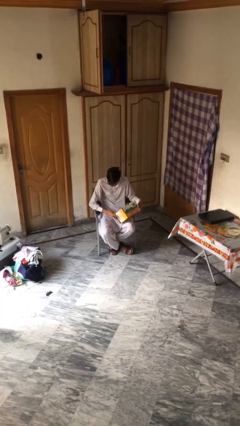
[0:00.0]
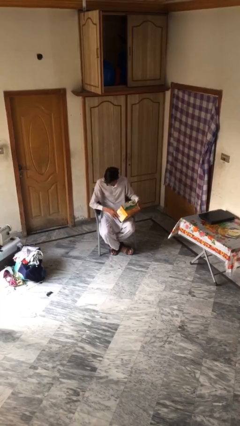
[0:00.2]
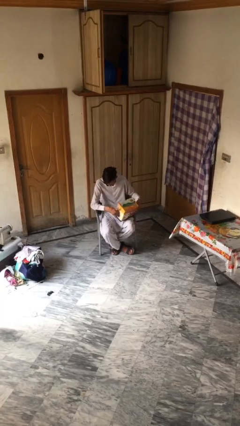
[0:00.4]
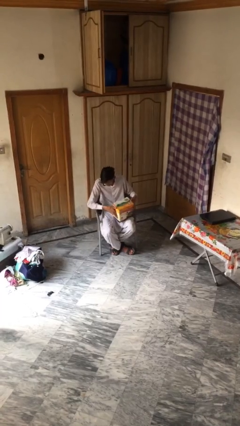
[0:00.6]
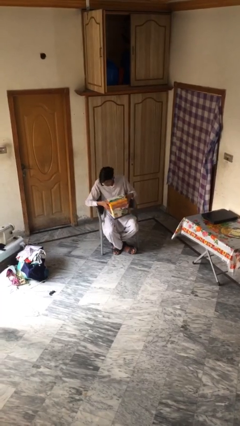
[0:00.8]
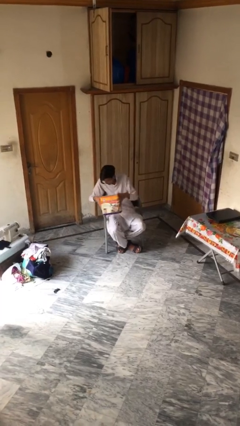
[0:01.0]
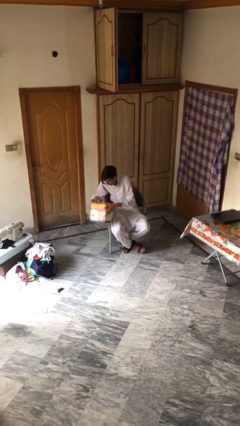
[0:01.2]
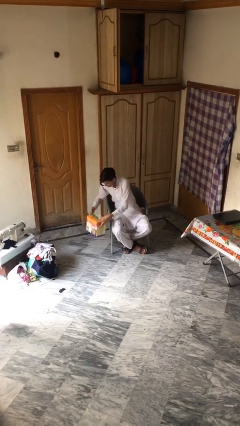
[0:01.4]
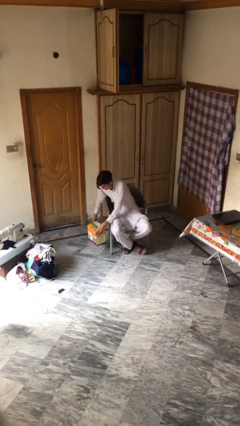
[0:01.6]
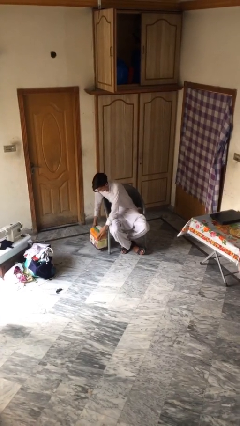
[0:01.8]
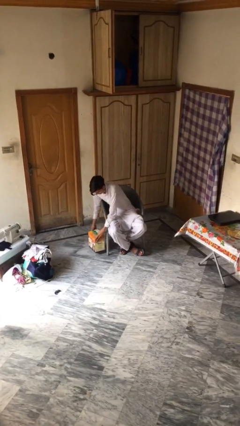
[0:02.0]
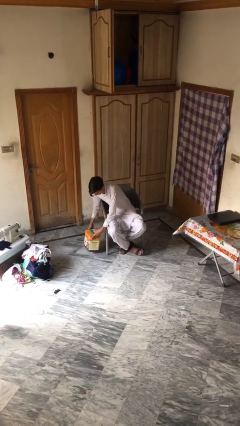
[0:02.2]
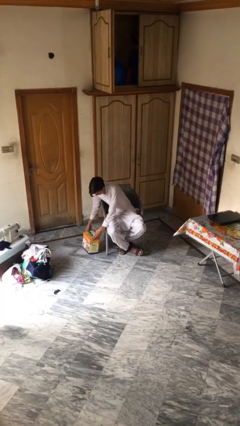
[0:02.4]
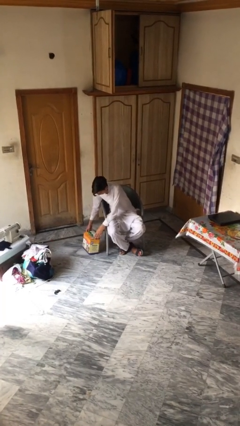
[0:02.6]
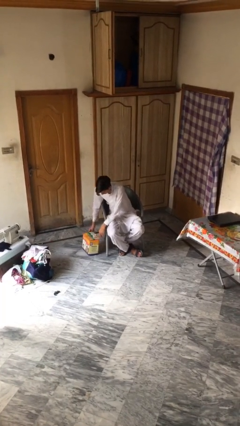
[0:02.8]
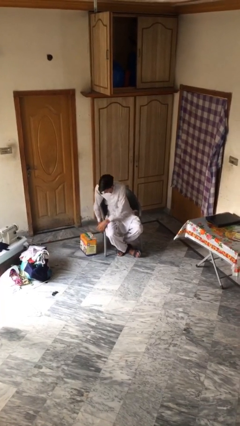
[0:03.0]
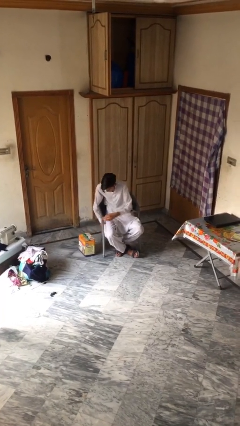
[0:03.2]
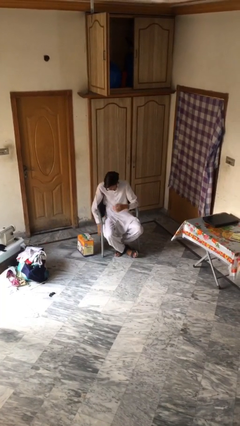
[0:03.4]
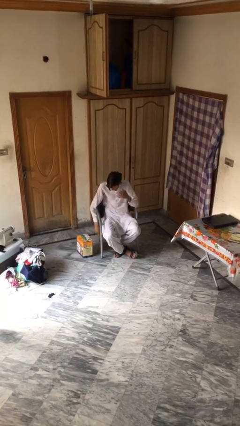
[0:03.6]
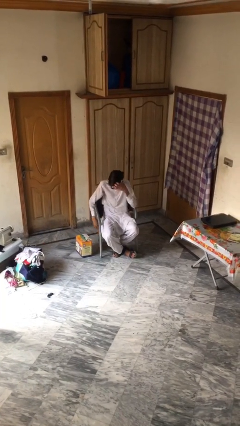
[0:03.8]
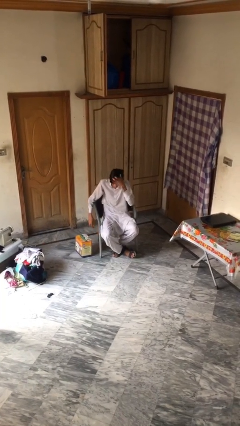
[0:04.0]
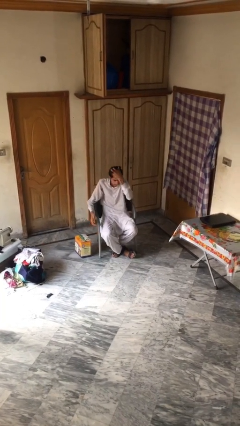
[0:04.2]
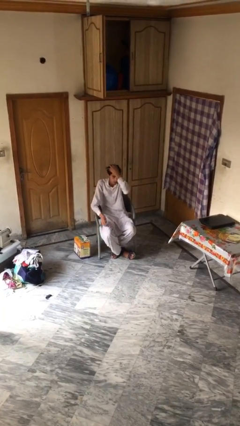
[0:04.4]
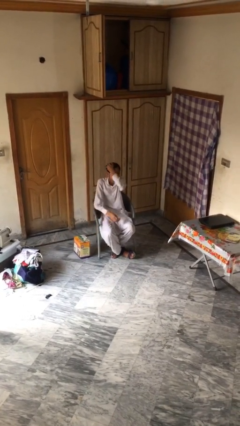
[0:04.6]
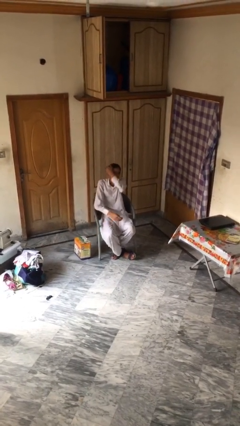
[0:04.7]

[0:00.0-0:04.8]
person puts down object on floor

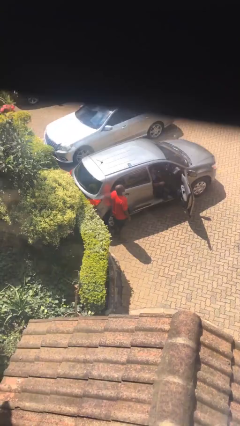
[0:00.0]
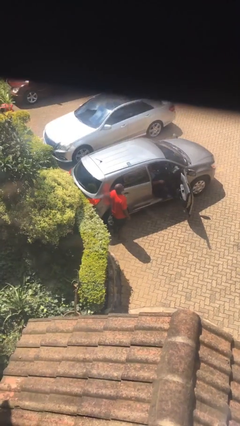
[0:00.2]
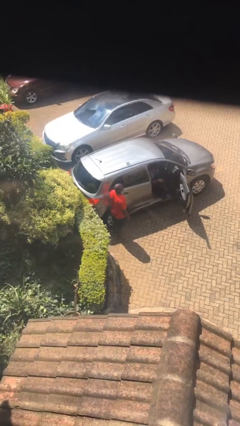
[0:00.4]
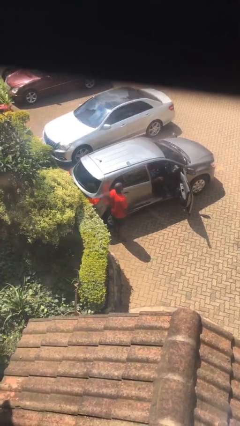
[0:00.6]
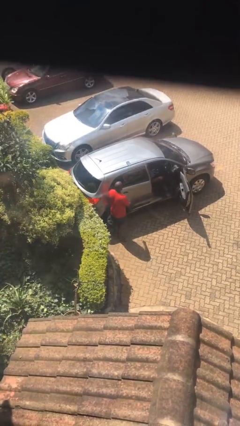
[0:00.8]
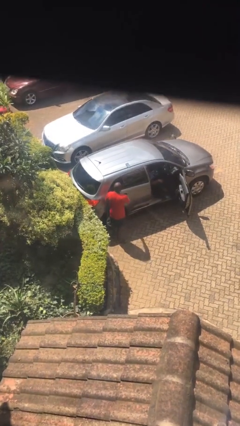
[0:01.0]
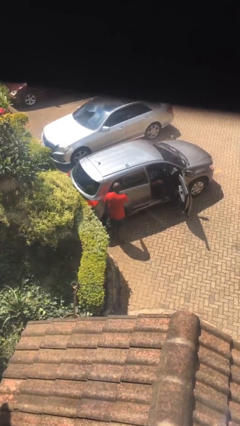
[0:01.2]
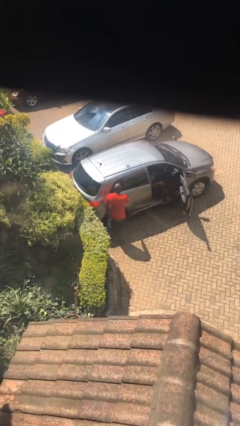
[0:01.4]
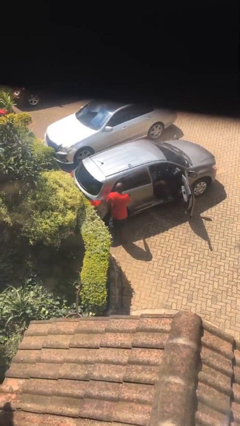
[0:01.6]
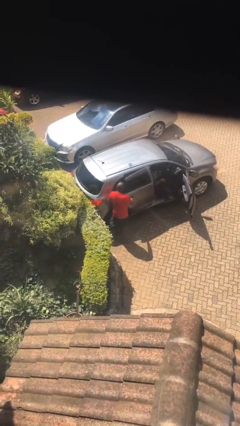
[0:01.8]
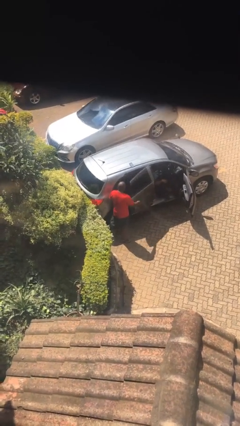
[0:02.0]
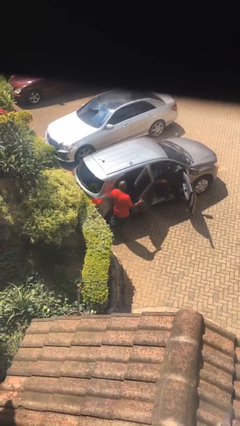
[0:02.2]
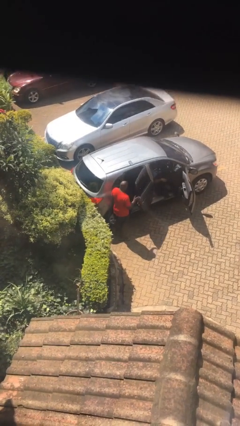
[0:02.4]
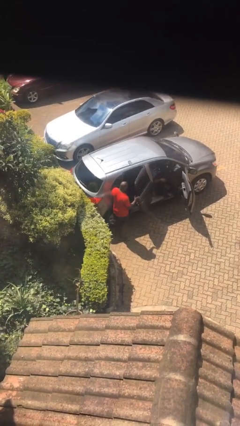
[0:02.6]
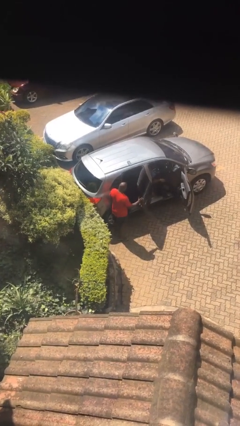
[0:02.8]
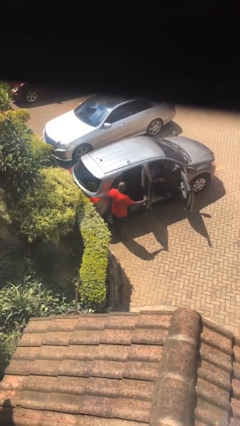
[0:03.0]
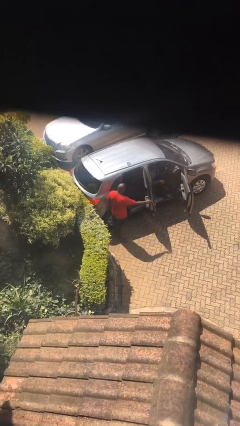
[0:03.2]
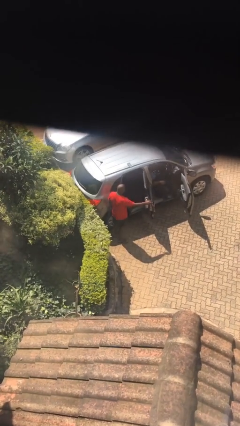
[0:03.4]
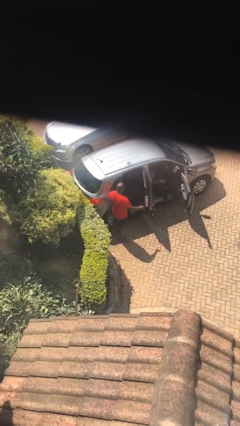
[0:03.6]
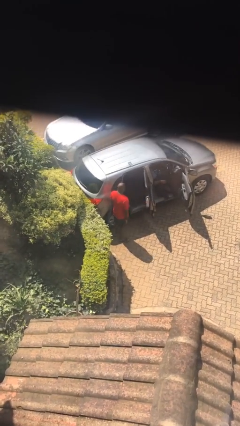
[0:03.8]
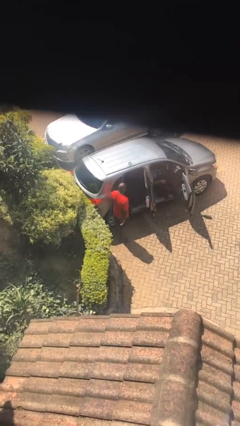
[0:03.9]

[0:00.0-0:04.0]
person opens car door

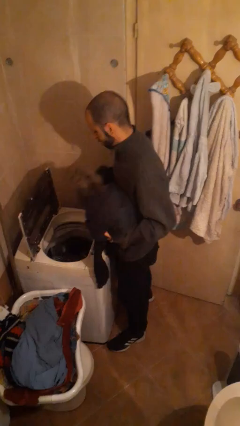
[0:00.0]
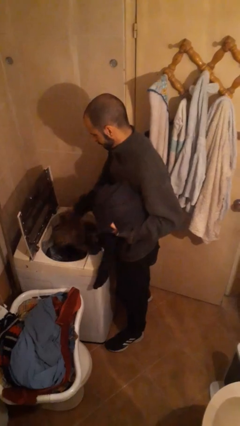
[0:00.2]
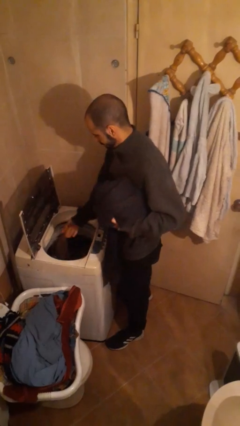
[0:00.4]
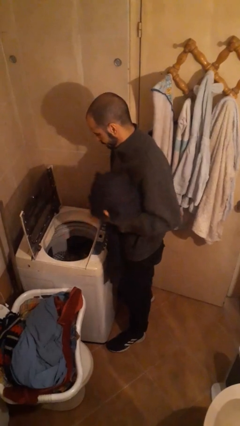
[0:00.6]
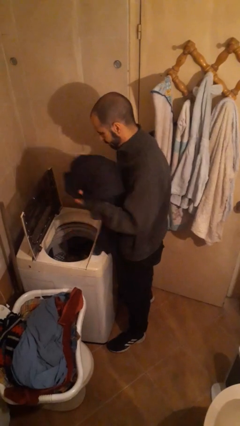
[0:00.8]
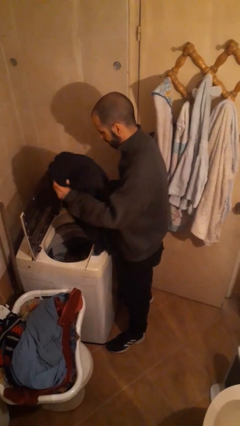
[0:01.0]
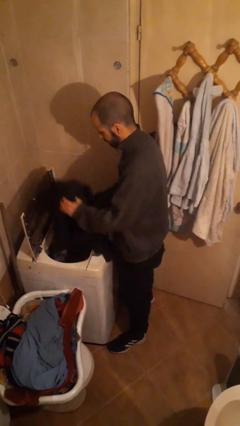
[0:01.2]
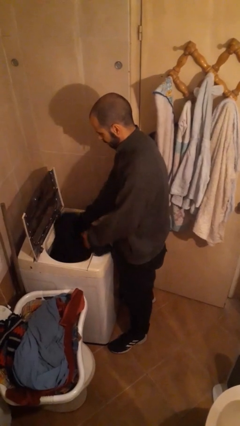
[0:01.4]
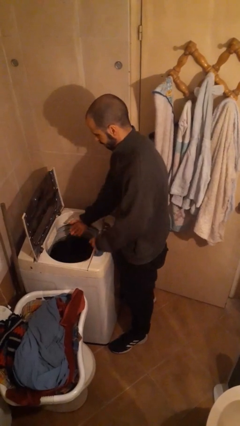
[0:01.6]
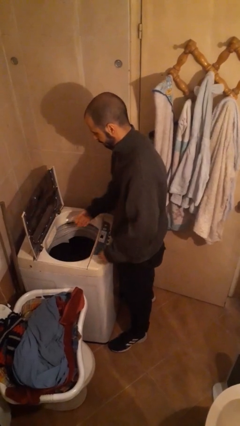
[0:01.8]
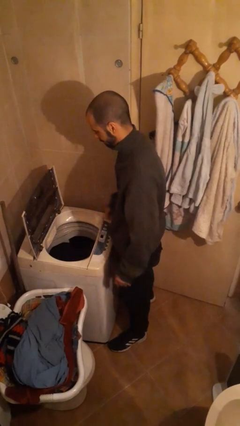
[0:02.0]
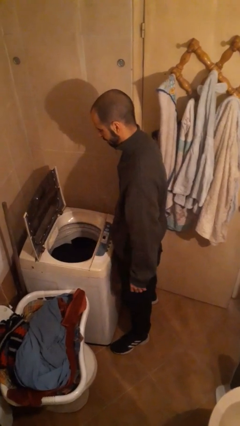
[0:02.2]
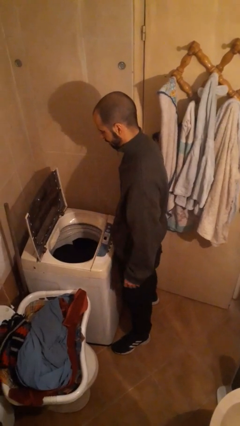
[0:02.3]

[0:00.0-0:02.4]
person loads clotheswasher

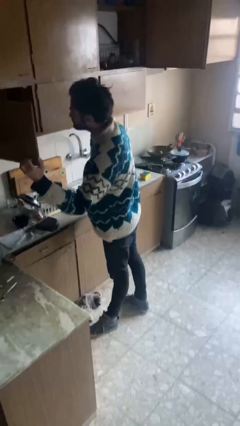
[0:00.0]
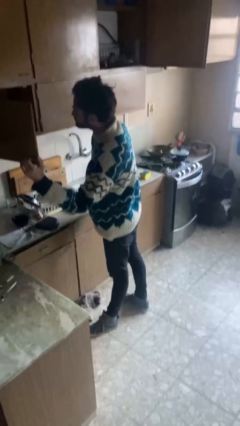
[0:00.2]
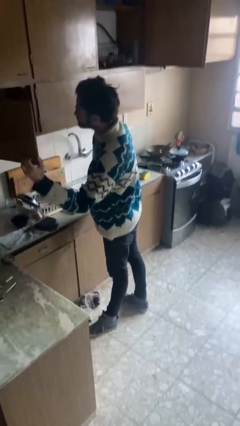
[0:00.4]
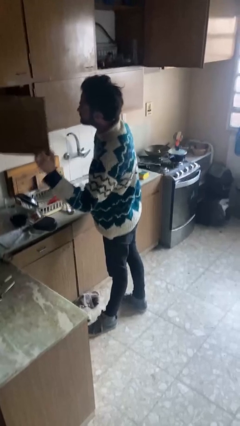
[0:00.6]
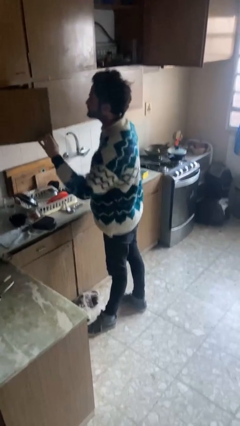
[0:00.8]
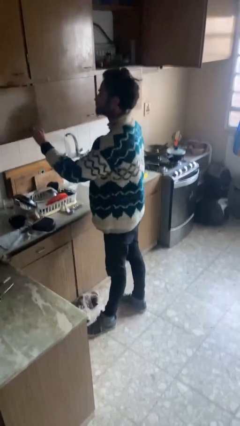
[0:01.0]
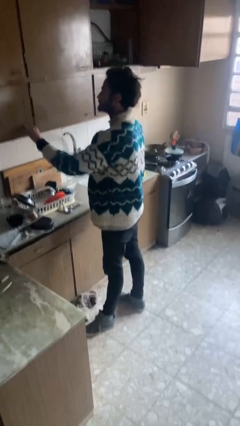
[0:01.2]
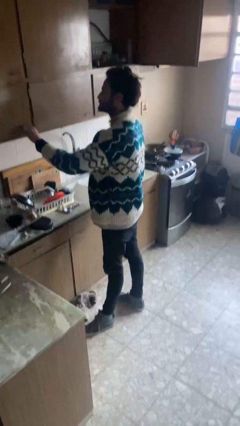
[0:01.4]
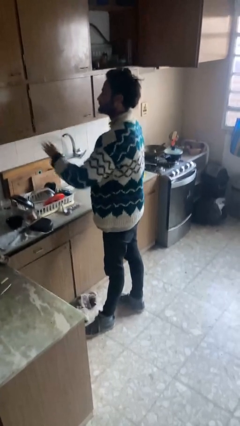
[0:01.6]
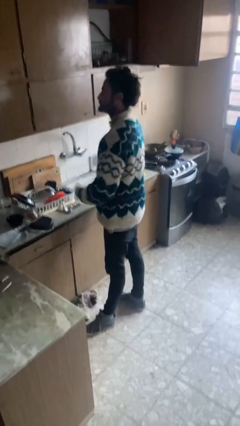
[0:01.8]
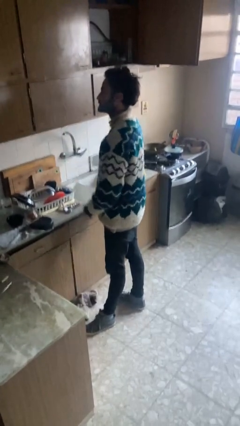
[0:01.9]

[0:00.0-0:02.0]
person closes cabinet

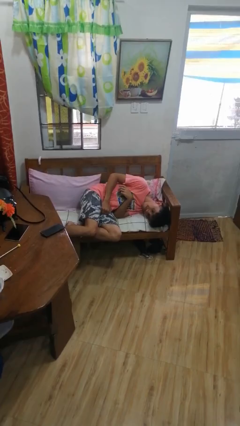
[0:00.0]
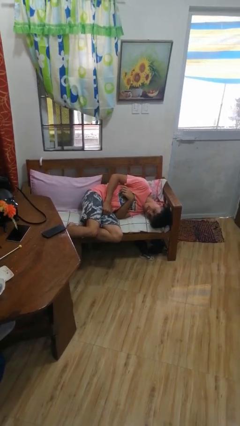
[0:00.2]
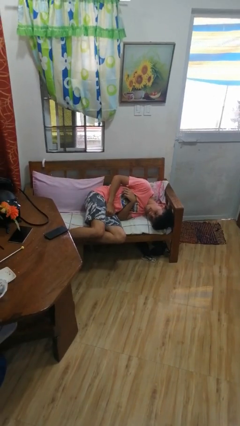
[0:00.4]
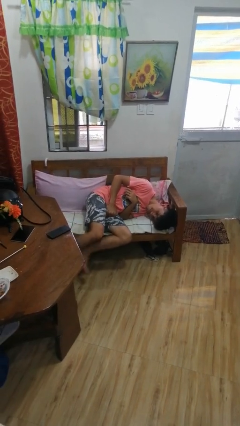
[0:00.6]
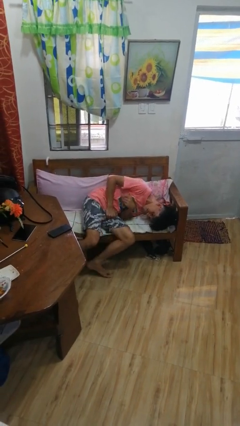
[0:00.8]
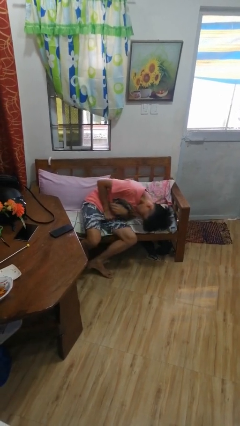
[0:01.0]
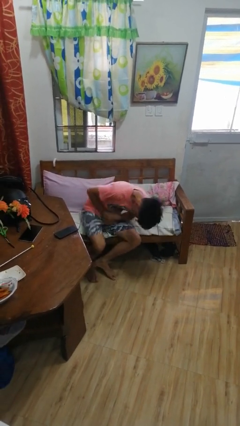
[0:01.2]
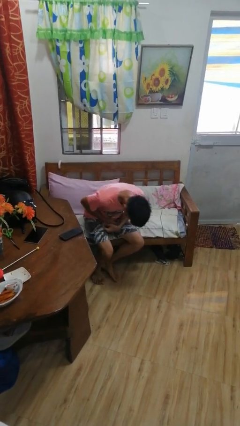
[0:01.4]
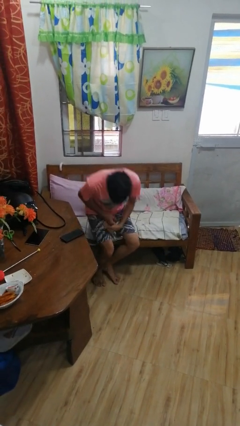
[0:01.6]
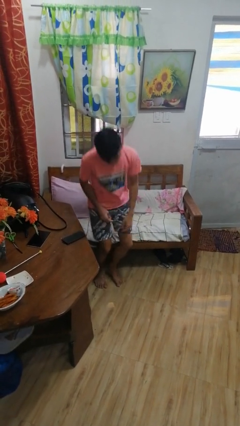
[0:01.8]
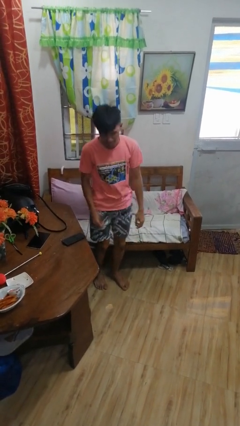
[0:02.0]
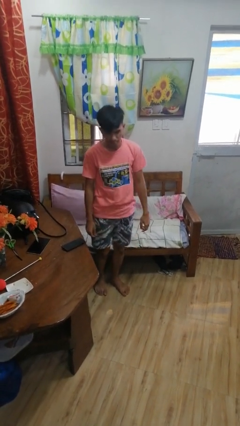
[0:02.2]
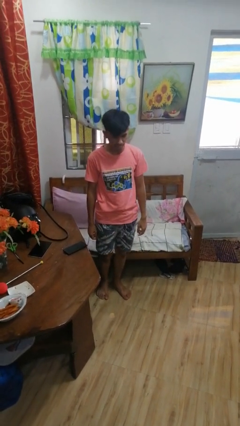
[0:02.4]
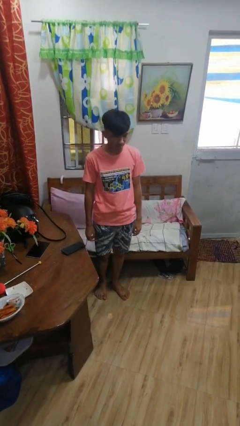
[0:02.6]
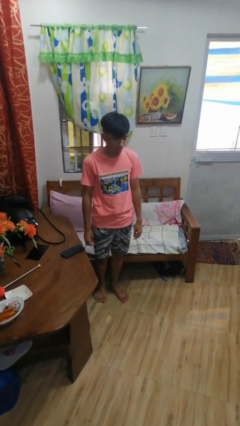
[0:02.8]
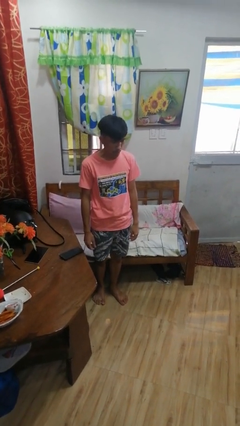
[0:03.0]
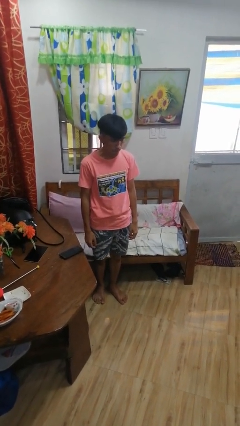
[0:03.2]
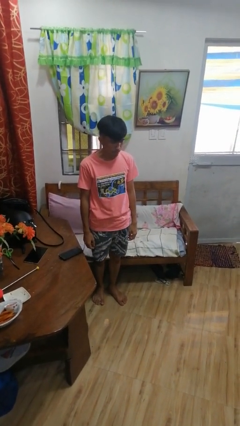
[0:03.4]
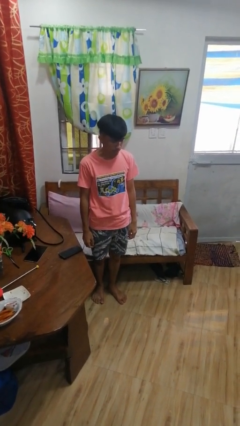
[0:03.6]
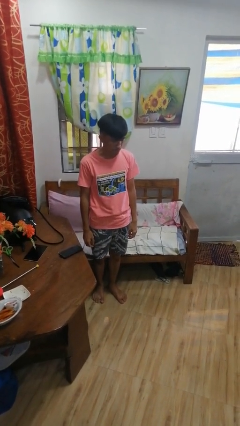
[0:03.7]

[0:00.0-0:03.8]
person stands up

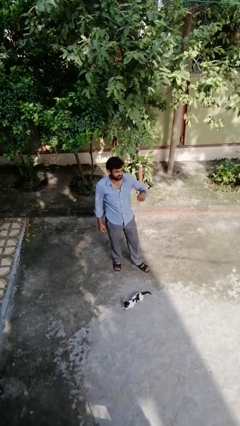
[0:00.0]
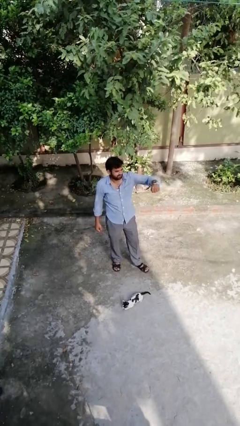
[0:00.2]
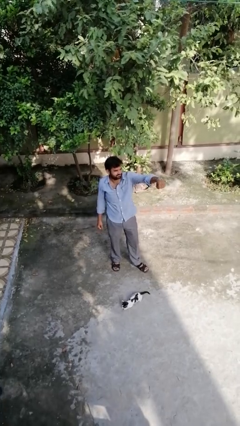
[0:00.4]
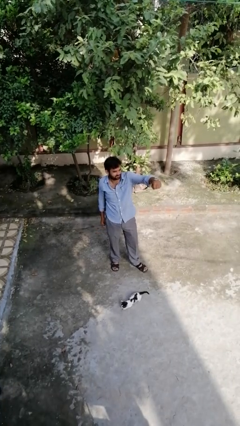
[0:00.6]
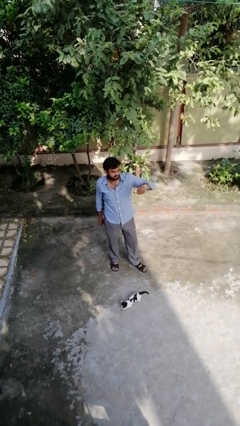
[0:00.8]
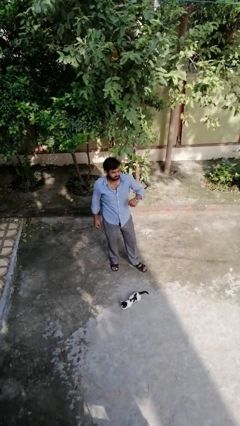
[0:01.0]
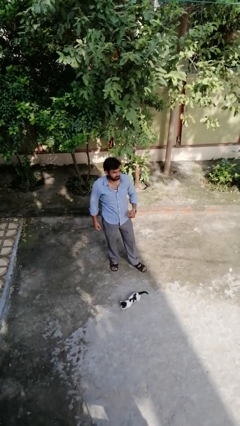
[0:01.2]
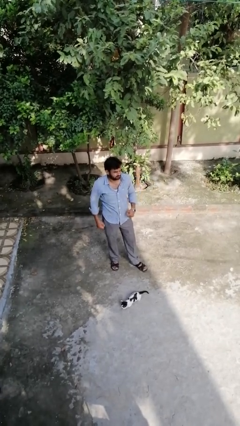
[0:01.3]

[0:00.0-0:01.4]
person punches
